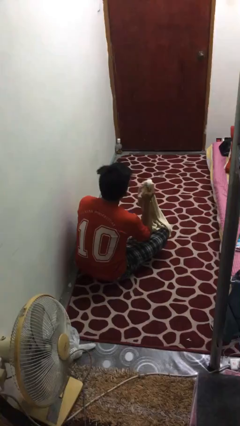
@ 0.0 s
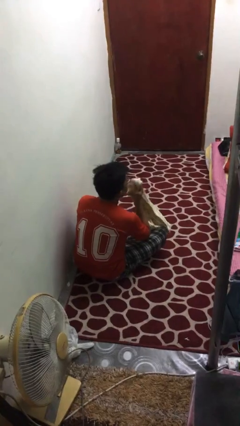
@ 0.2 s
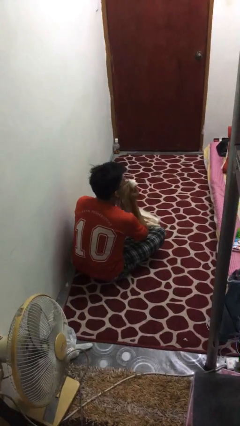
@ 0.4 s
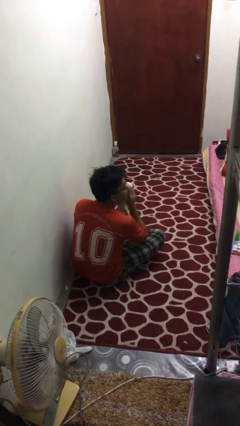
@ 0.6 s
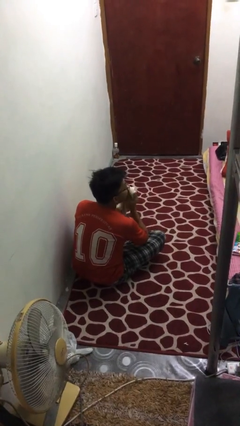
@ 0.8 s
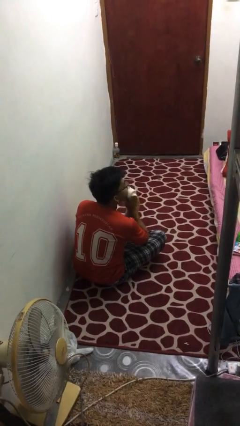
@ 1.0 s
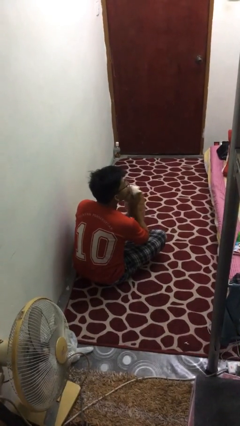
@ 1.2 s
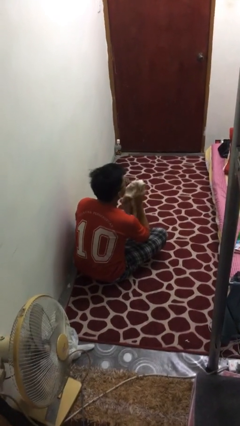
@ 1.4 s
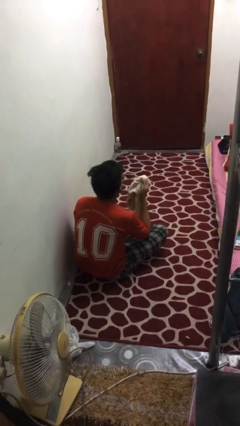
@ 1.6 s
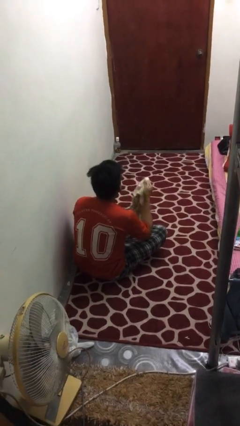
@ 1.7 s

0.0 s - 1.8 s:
person wipes mouth with napkin

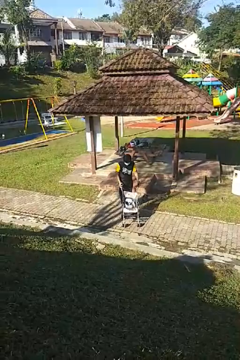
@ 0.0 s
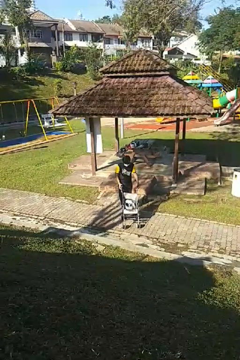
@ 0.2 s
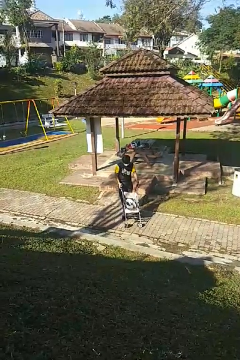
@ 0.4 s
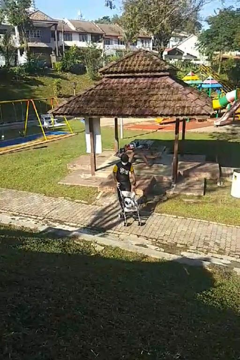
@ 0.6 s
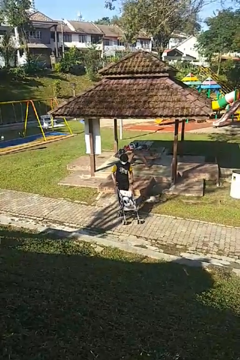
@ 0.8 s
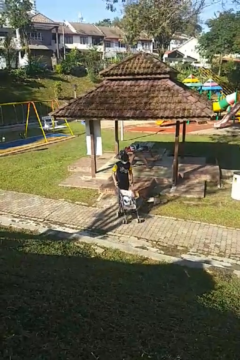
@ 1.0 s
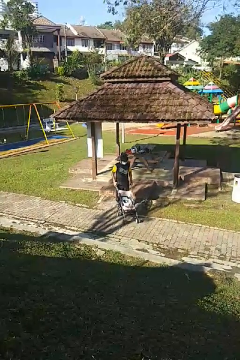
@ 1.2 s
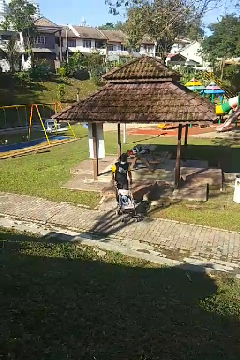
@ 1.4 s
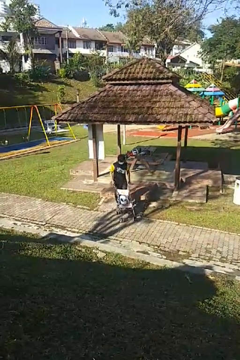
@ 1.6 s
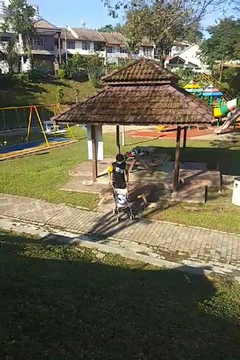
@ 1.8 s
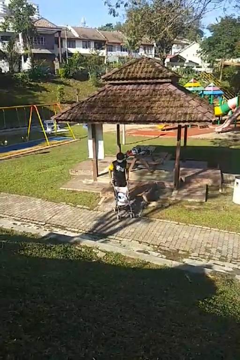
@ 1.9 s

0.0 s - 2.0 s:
person pulls wheeled cart

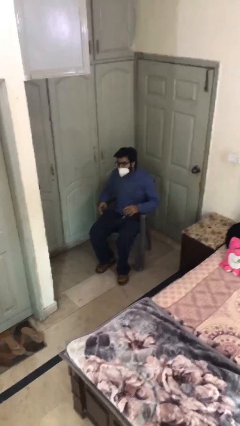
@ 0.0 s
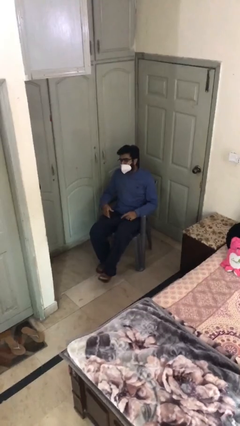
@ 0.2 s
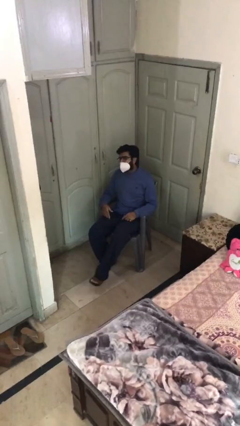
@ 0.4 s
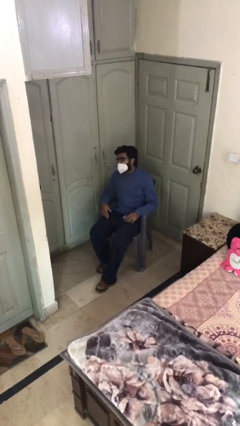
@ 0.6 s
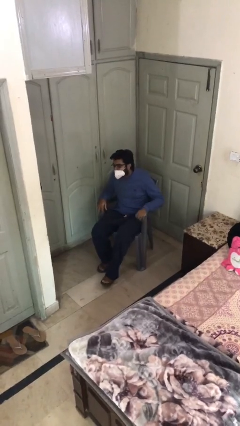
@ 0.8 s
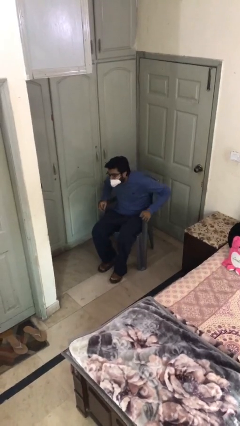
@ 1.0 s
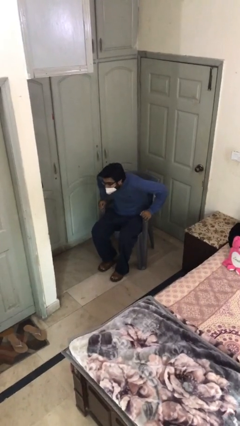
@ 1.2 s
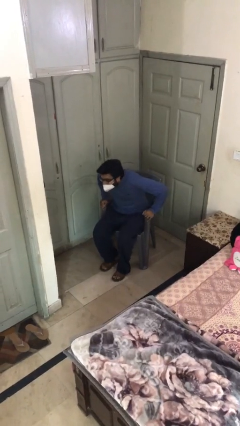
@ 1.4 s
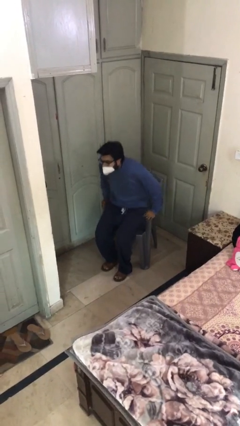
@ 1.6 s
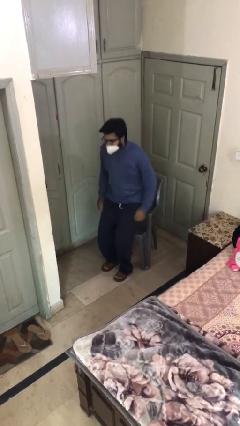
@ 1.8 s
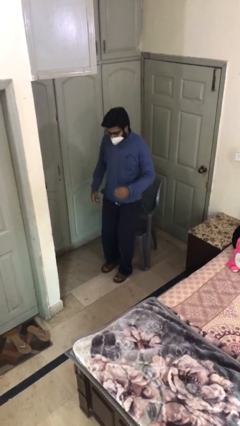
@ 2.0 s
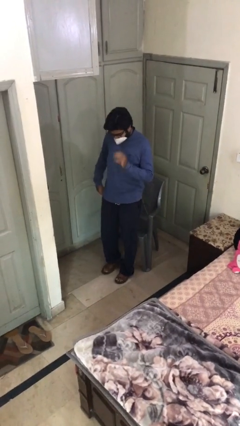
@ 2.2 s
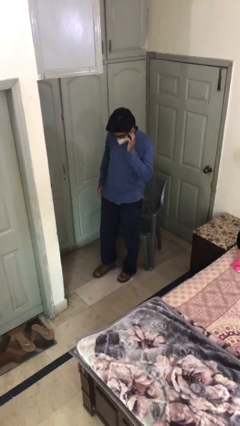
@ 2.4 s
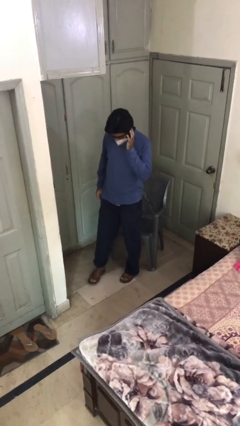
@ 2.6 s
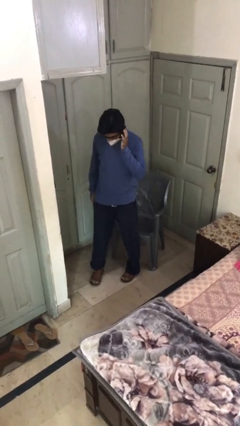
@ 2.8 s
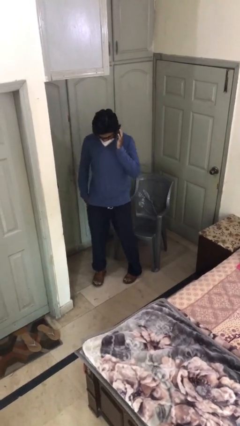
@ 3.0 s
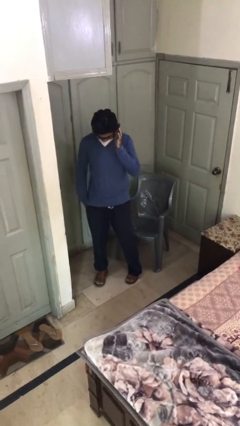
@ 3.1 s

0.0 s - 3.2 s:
person stands up

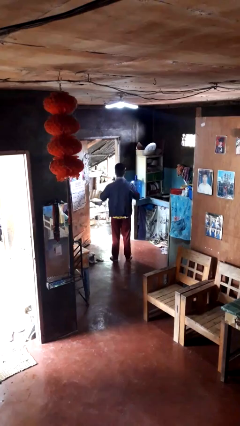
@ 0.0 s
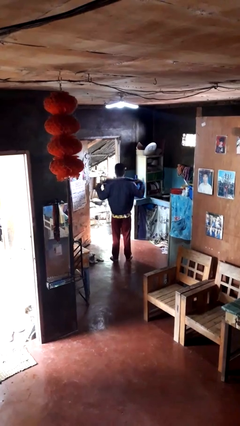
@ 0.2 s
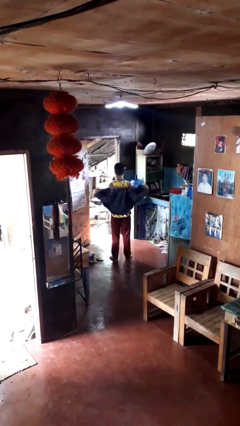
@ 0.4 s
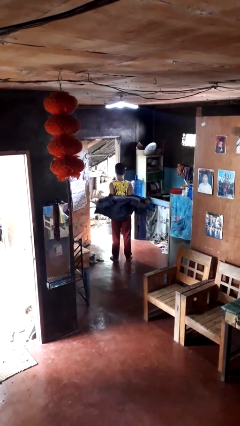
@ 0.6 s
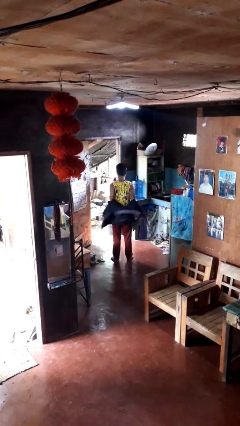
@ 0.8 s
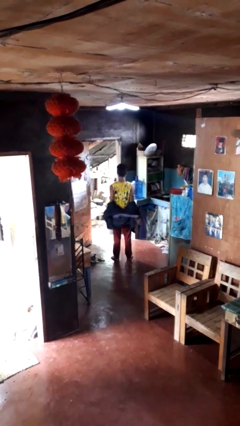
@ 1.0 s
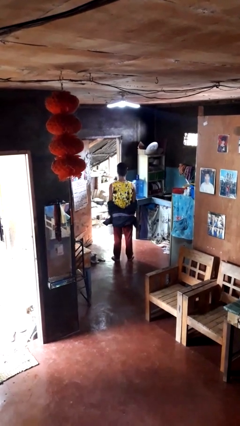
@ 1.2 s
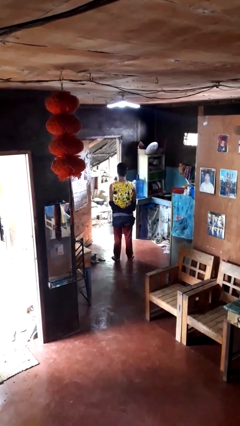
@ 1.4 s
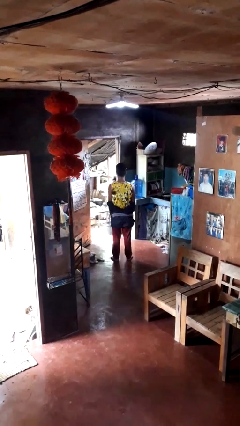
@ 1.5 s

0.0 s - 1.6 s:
person takes off jacket

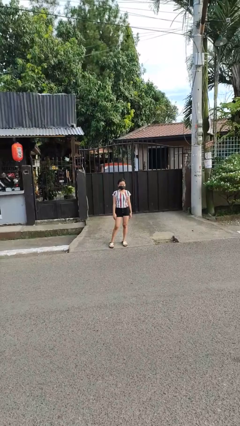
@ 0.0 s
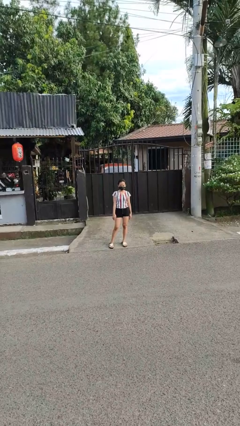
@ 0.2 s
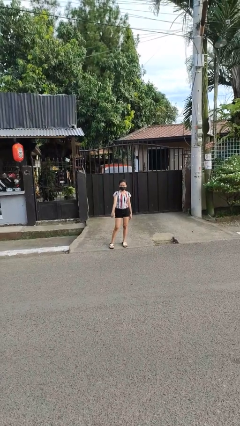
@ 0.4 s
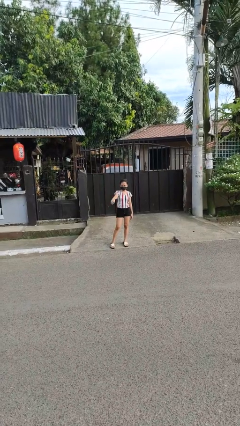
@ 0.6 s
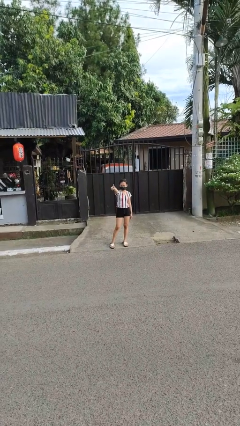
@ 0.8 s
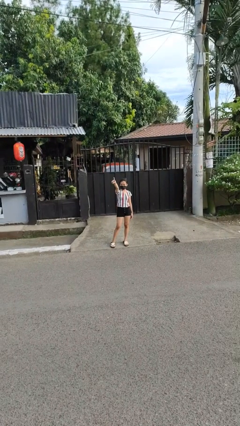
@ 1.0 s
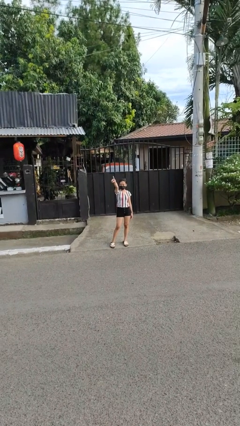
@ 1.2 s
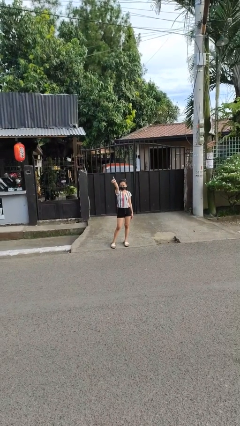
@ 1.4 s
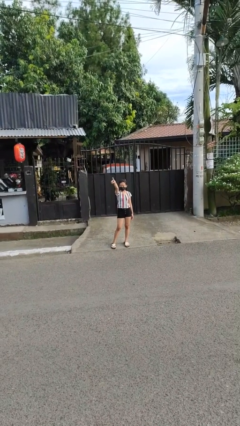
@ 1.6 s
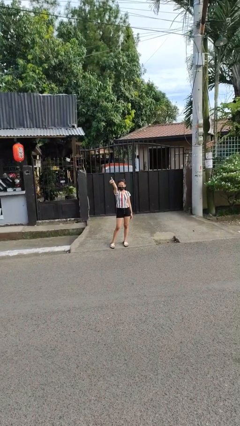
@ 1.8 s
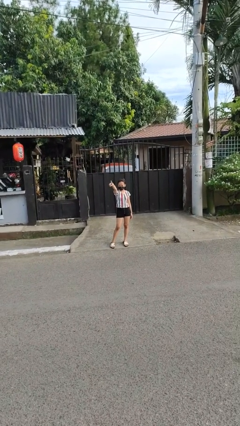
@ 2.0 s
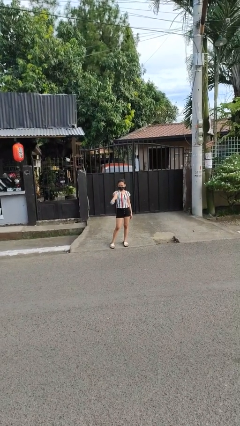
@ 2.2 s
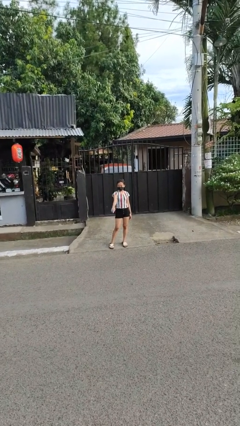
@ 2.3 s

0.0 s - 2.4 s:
person points at person

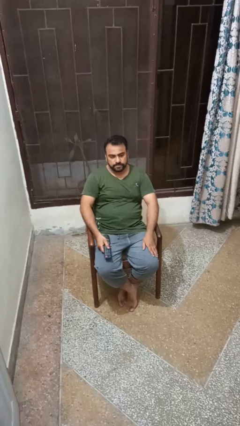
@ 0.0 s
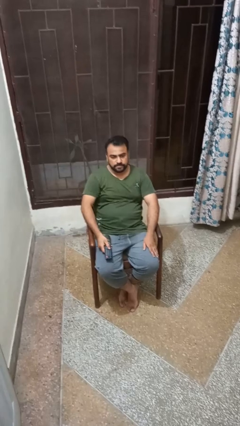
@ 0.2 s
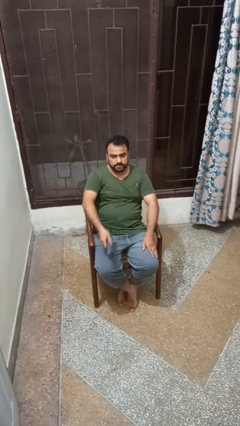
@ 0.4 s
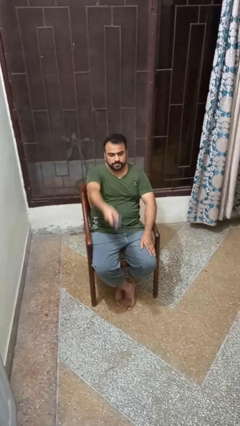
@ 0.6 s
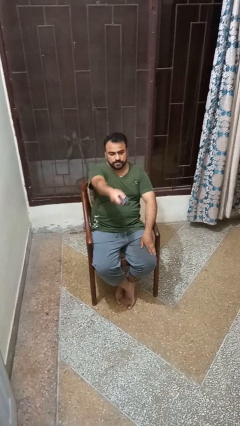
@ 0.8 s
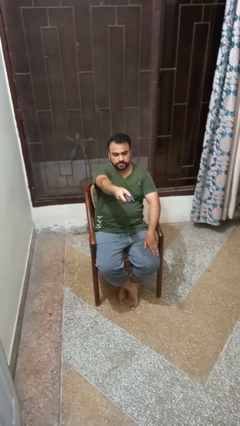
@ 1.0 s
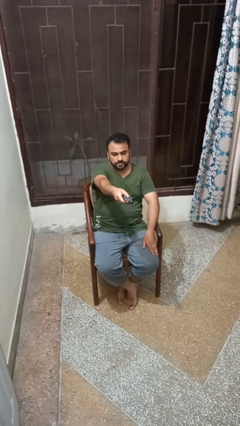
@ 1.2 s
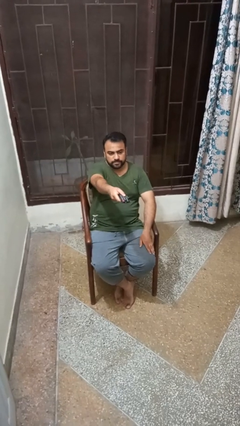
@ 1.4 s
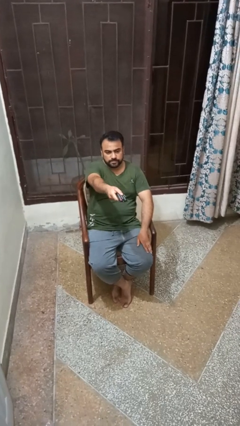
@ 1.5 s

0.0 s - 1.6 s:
person uses television remote

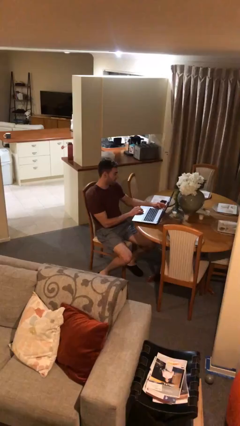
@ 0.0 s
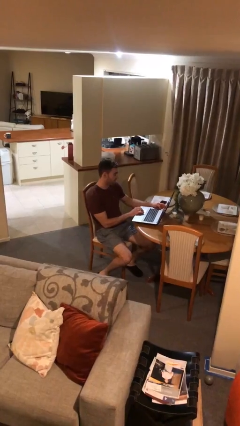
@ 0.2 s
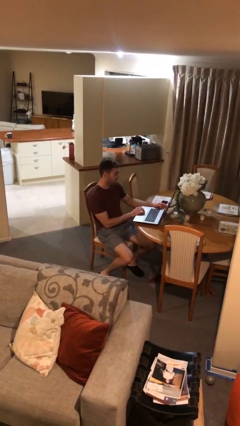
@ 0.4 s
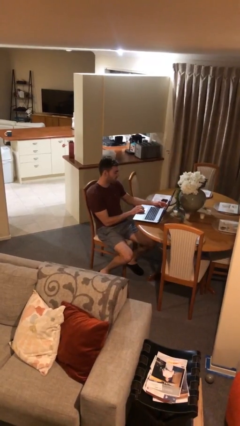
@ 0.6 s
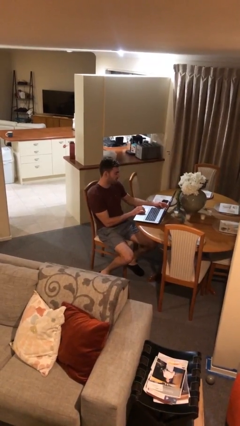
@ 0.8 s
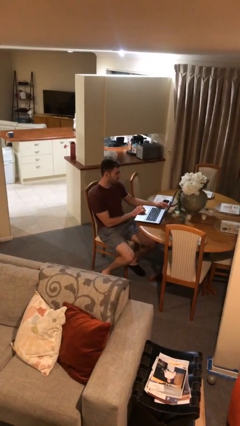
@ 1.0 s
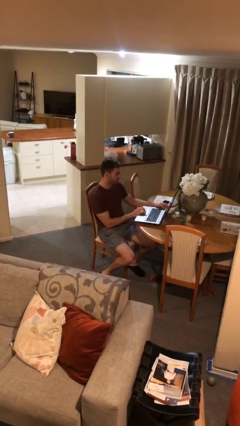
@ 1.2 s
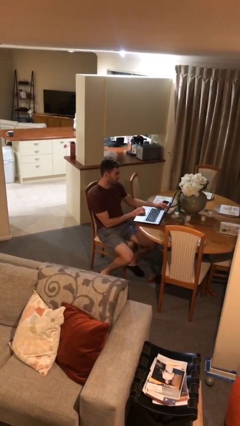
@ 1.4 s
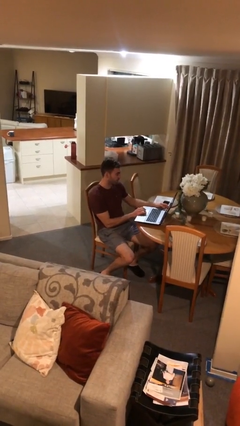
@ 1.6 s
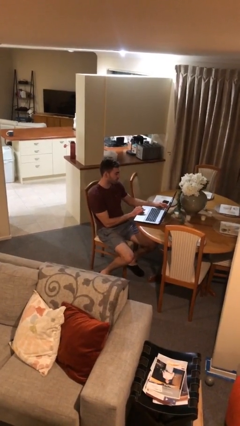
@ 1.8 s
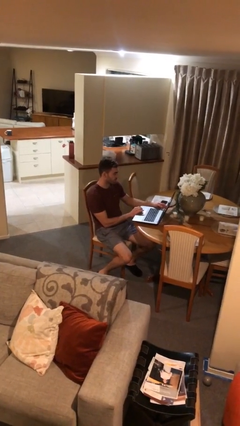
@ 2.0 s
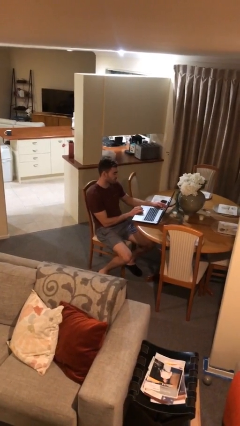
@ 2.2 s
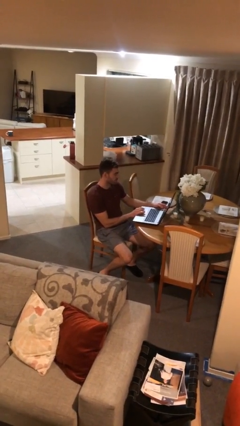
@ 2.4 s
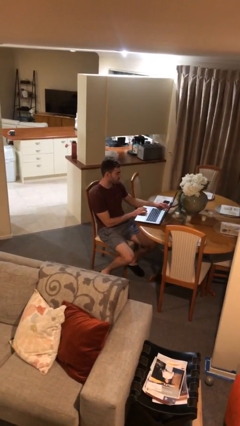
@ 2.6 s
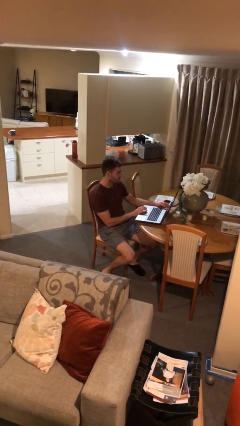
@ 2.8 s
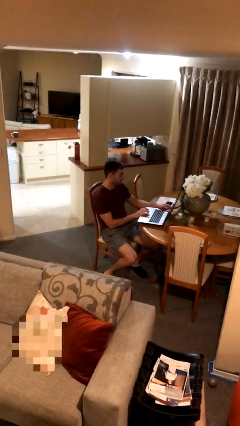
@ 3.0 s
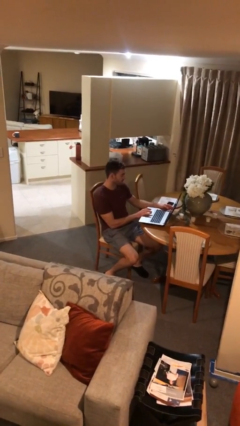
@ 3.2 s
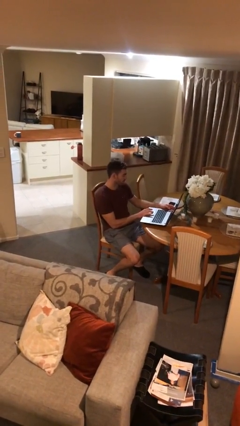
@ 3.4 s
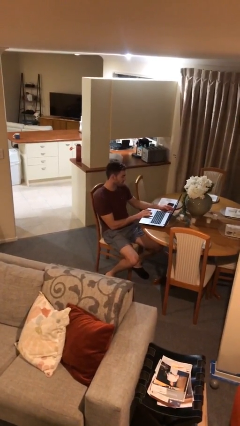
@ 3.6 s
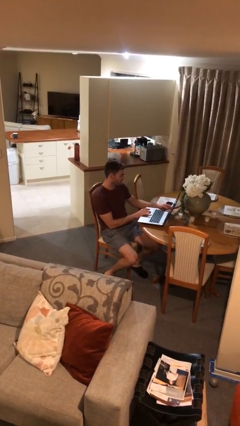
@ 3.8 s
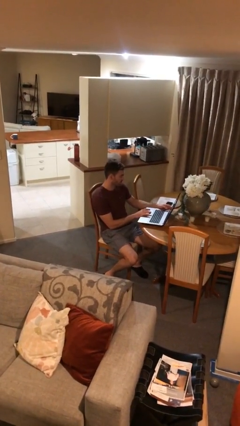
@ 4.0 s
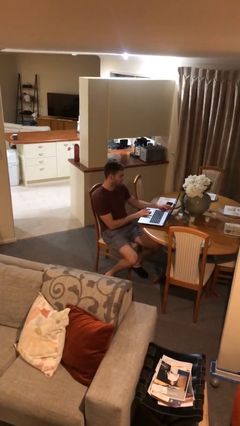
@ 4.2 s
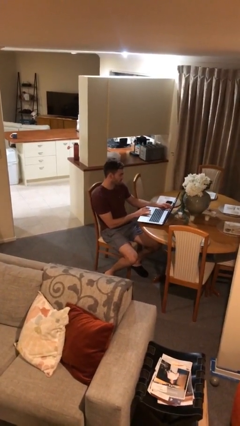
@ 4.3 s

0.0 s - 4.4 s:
person interacts with laptop

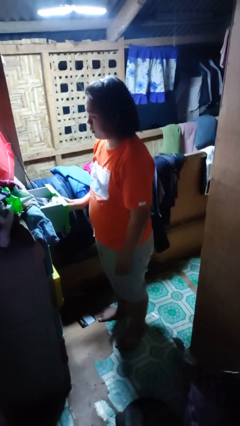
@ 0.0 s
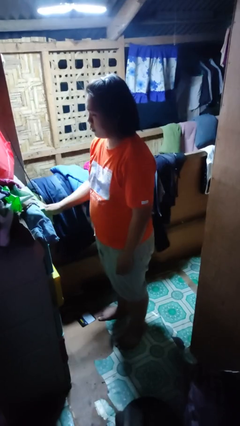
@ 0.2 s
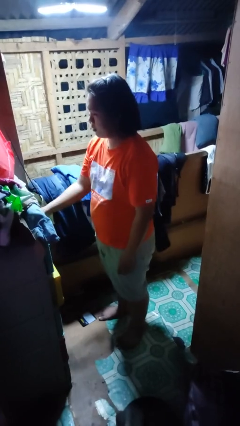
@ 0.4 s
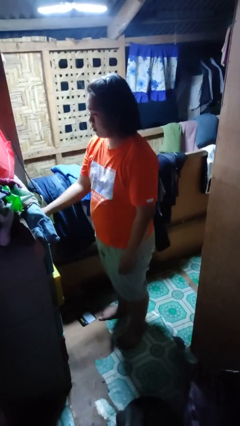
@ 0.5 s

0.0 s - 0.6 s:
person closes dresser drawer
